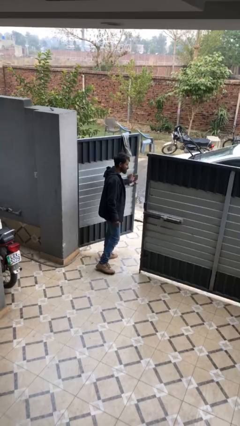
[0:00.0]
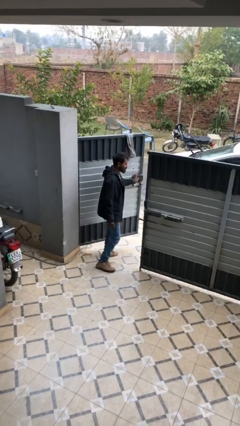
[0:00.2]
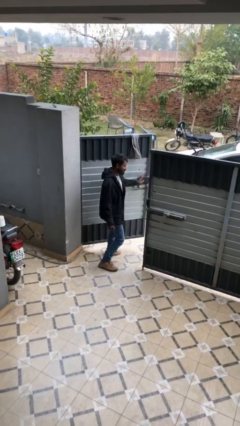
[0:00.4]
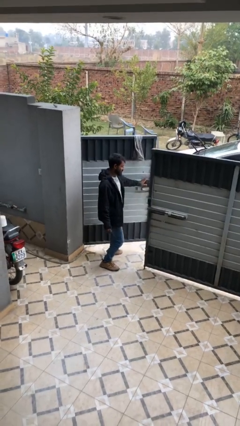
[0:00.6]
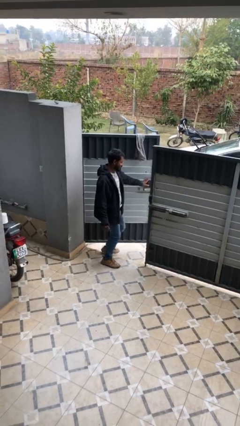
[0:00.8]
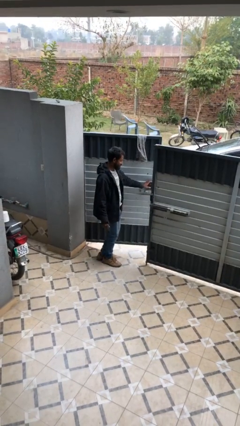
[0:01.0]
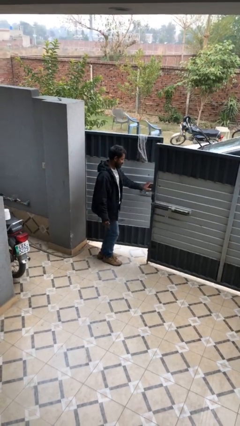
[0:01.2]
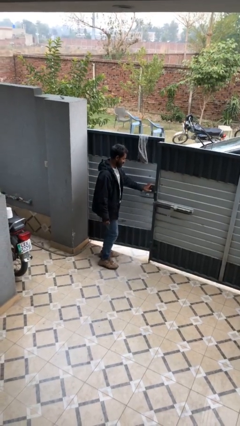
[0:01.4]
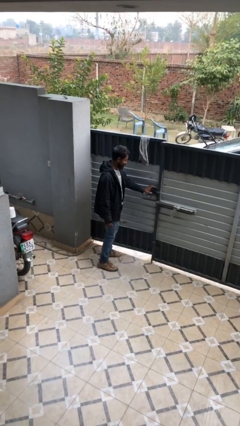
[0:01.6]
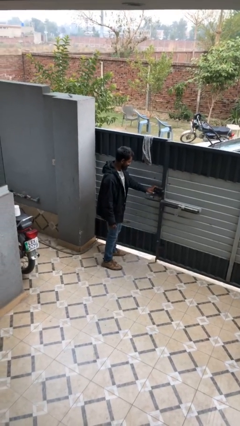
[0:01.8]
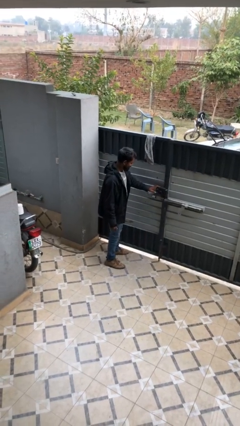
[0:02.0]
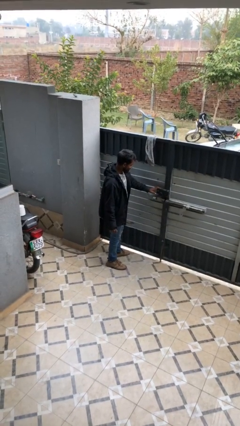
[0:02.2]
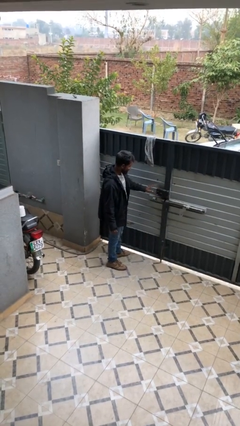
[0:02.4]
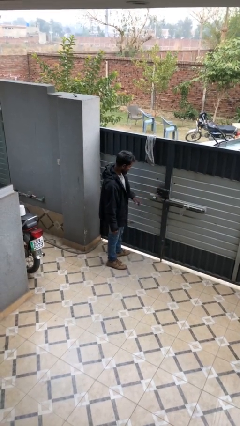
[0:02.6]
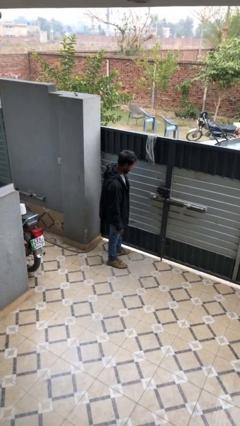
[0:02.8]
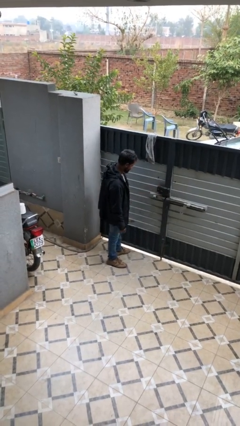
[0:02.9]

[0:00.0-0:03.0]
person closes facility door

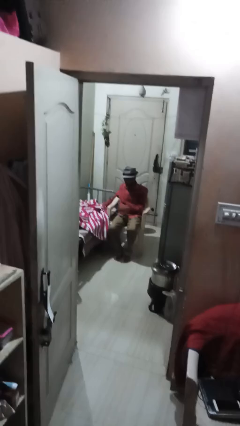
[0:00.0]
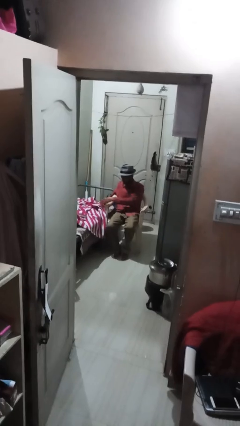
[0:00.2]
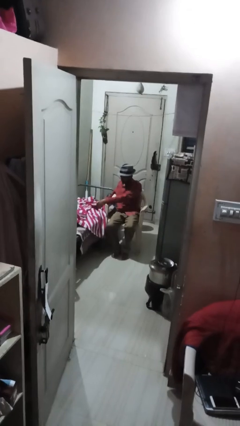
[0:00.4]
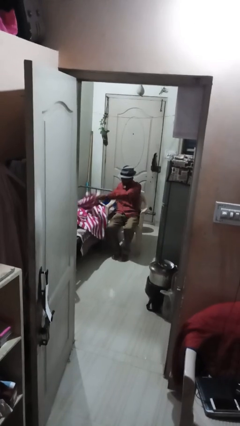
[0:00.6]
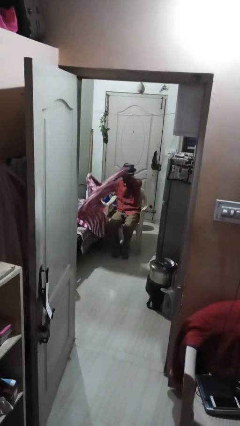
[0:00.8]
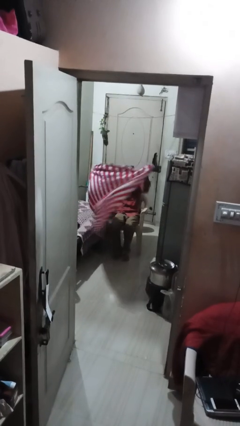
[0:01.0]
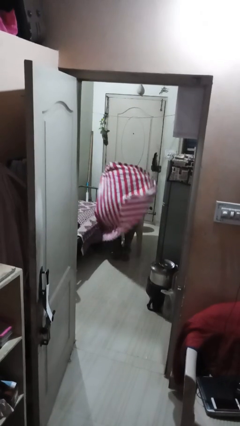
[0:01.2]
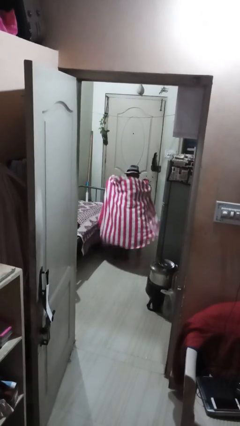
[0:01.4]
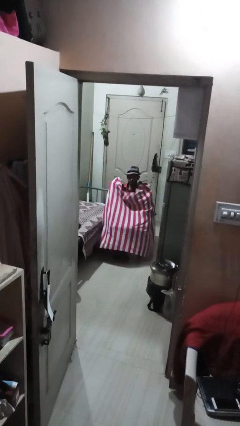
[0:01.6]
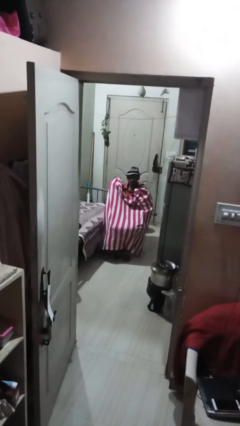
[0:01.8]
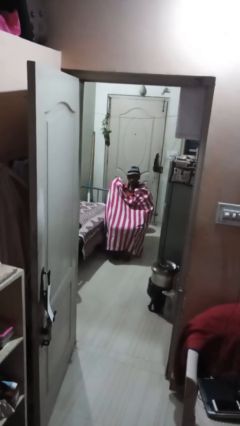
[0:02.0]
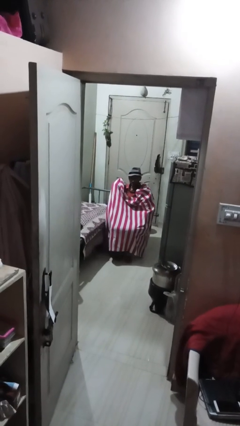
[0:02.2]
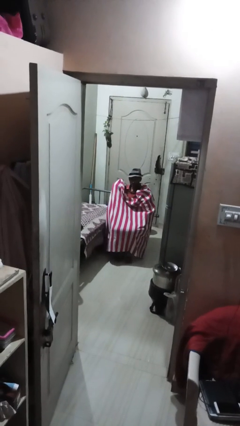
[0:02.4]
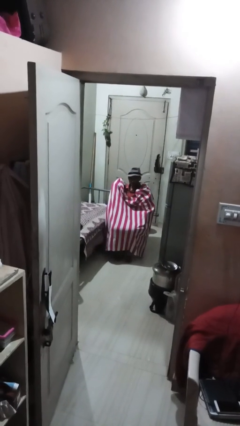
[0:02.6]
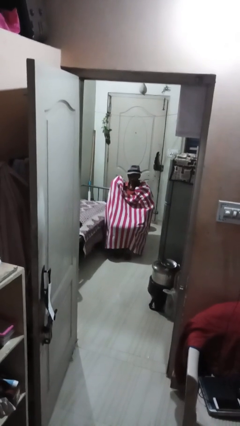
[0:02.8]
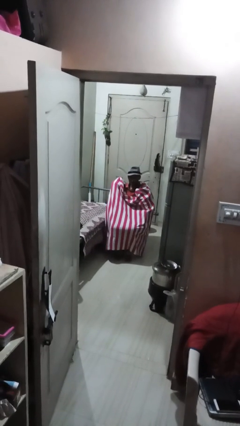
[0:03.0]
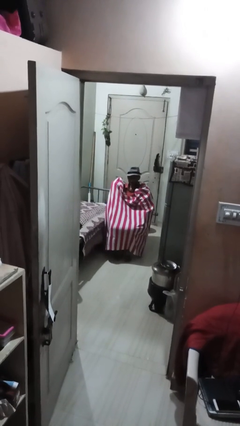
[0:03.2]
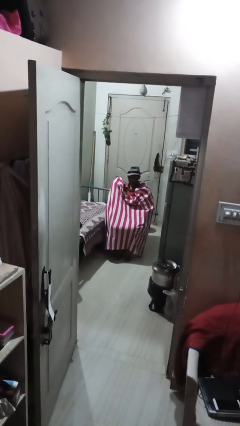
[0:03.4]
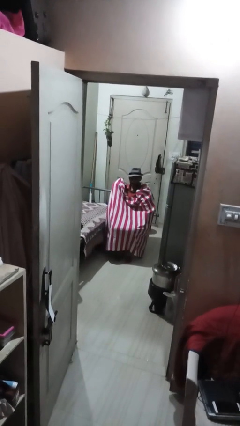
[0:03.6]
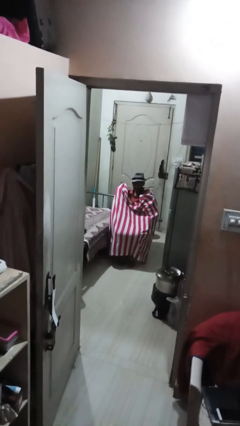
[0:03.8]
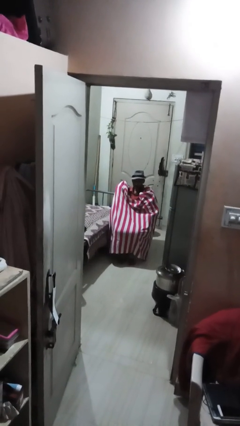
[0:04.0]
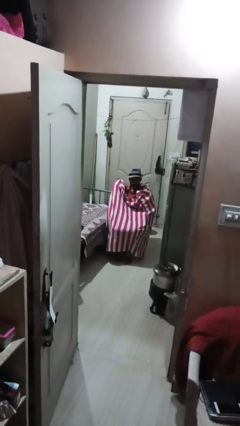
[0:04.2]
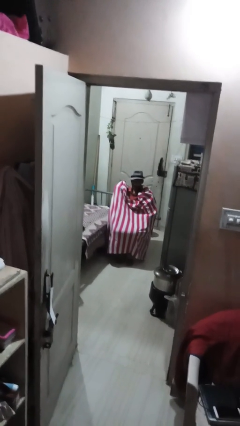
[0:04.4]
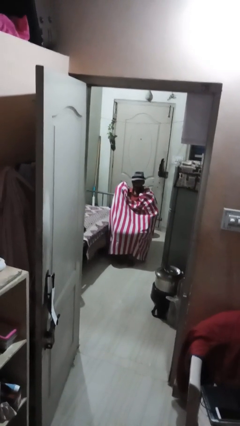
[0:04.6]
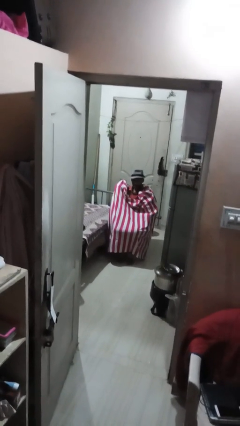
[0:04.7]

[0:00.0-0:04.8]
person covers with blanket

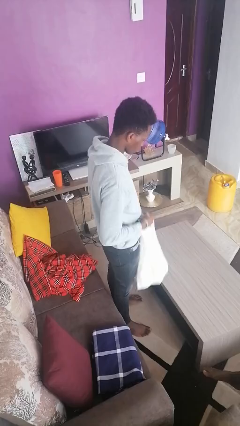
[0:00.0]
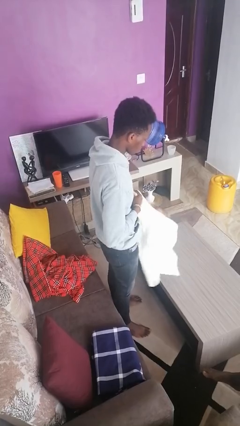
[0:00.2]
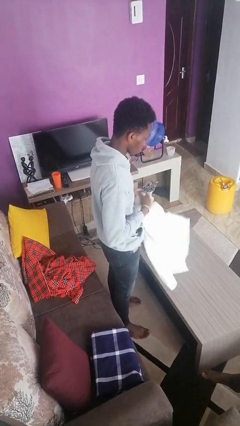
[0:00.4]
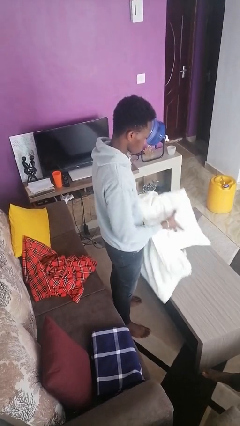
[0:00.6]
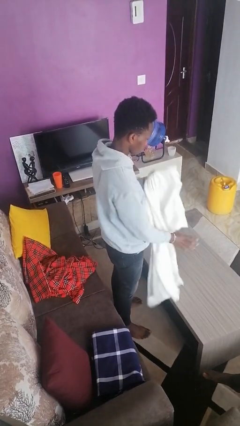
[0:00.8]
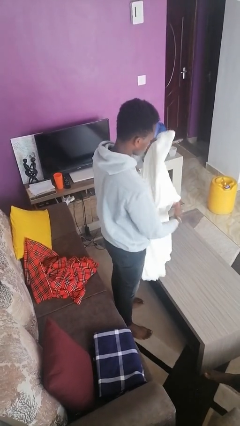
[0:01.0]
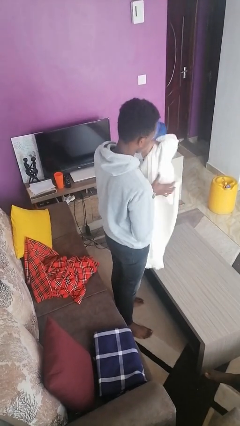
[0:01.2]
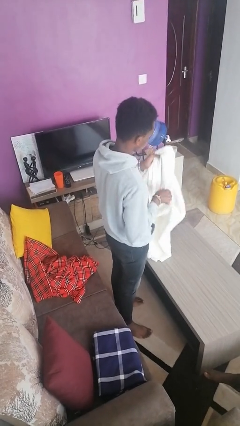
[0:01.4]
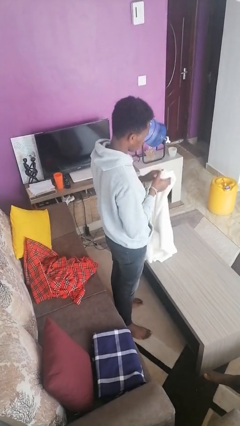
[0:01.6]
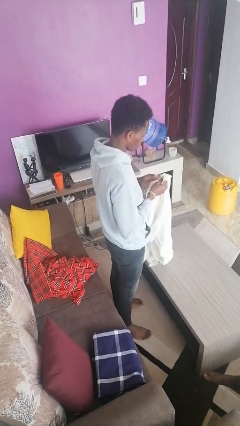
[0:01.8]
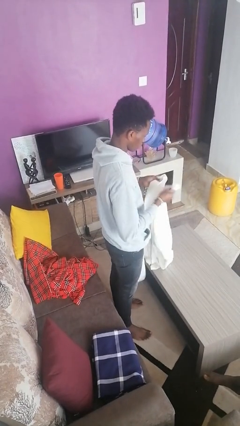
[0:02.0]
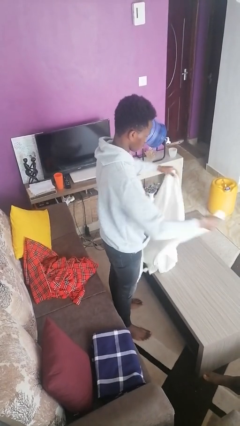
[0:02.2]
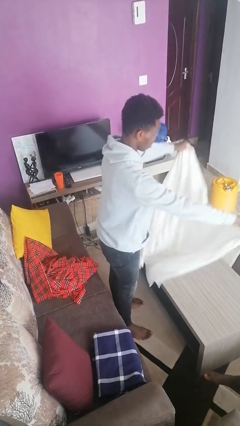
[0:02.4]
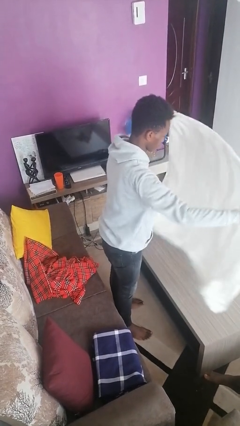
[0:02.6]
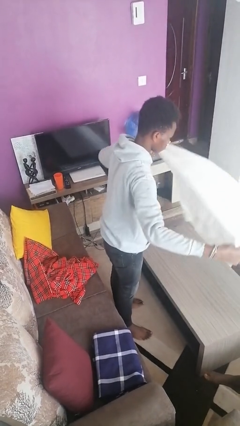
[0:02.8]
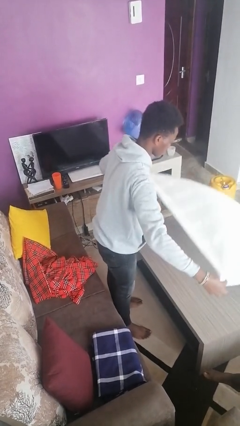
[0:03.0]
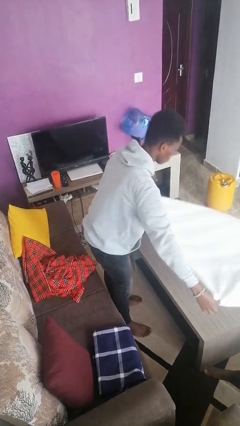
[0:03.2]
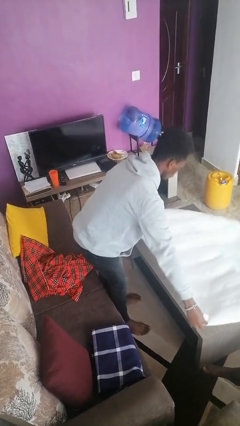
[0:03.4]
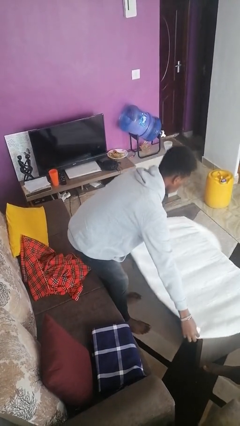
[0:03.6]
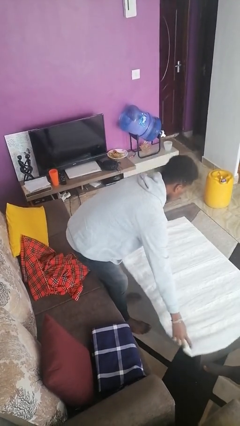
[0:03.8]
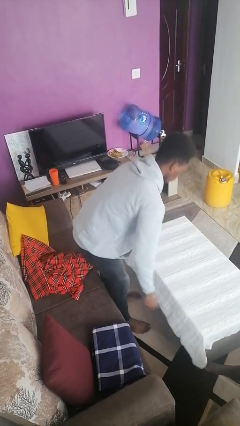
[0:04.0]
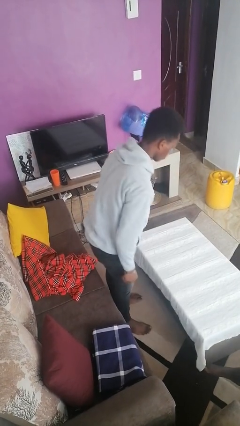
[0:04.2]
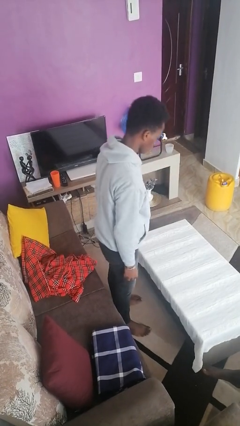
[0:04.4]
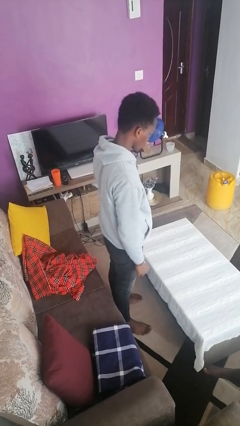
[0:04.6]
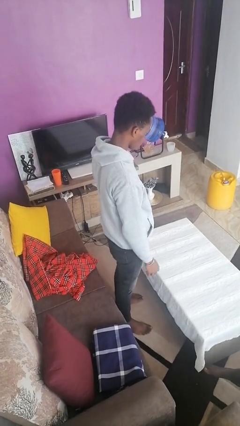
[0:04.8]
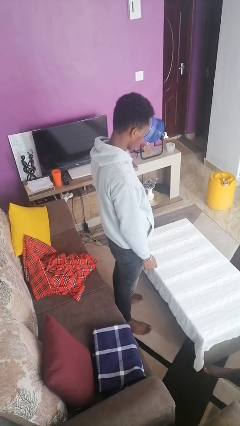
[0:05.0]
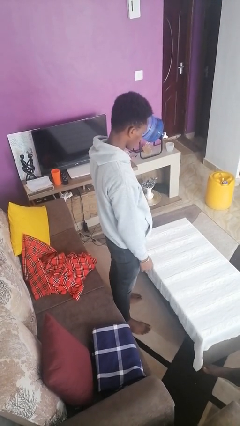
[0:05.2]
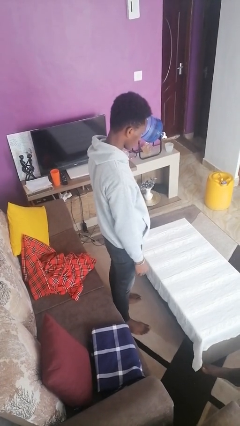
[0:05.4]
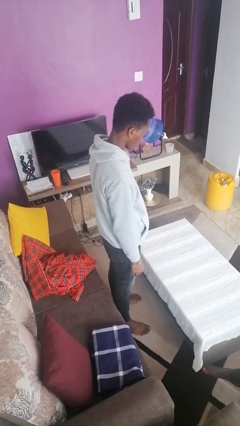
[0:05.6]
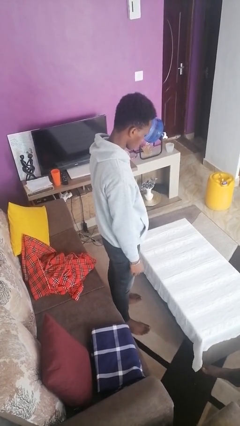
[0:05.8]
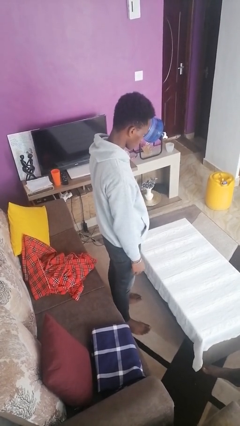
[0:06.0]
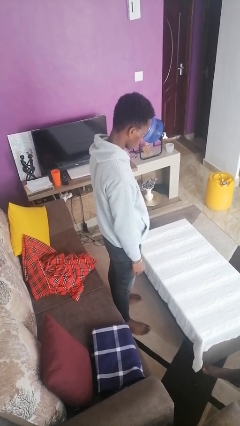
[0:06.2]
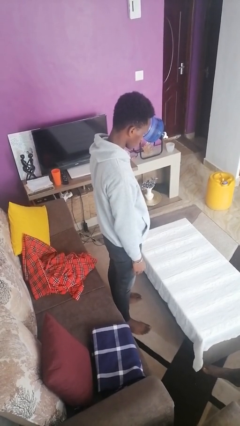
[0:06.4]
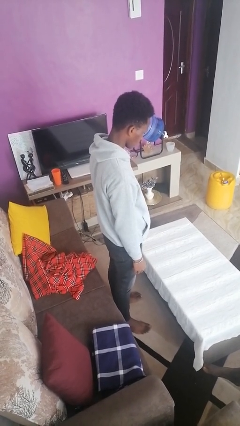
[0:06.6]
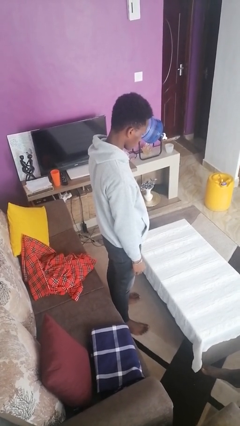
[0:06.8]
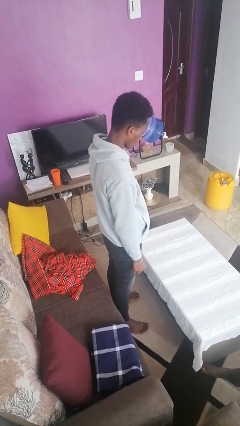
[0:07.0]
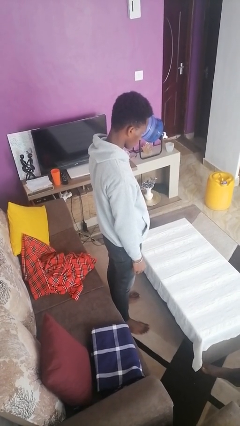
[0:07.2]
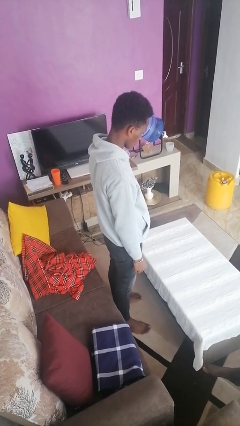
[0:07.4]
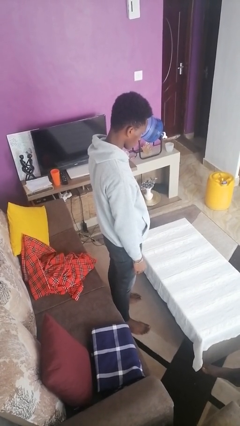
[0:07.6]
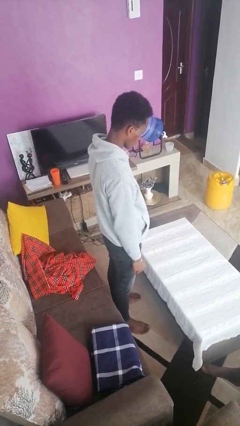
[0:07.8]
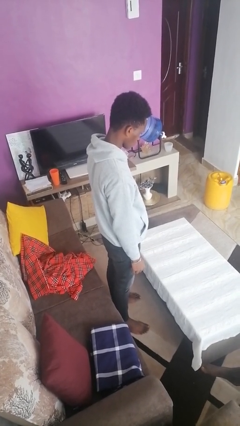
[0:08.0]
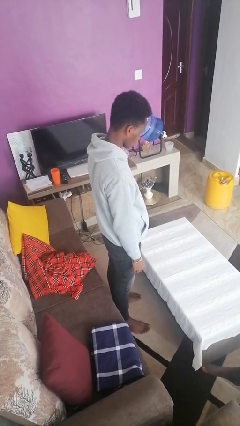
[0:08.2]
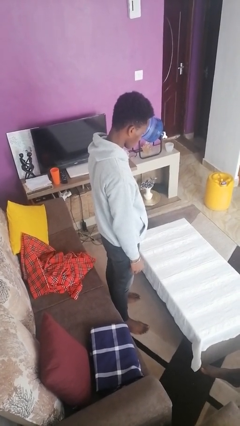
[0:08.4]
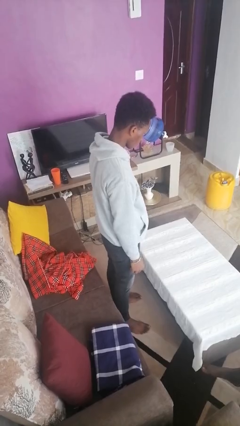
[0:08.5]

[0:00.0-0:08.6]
person spreads tablecloth

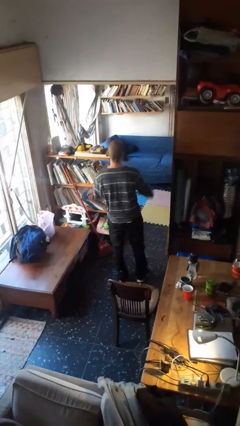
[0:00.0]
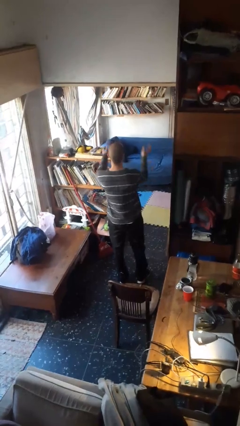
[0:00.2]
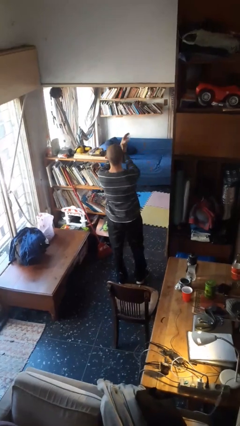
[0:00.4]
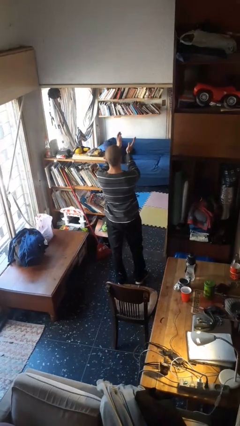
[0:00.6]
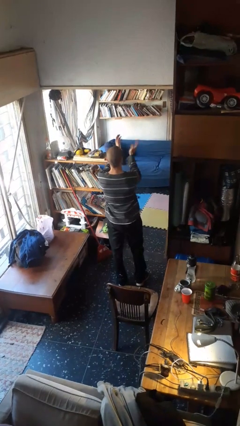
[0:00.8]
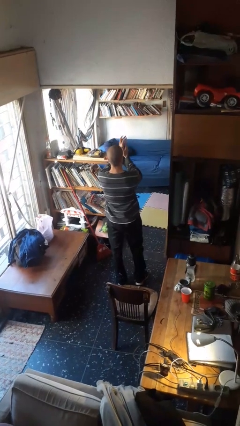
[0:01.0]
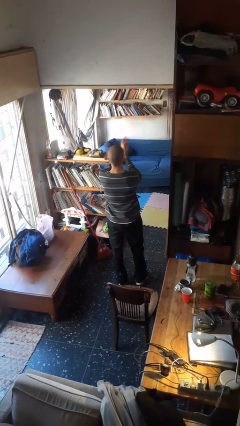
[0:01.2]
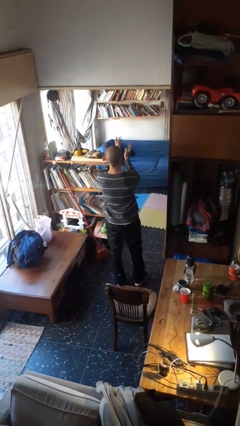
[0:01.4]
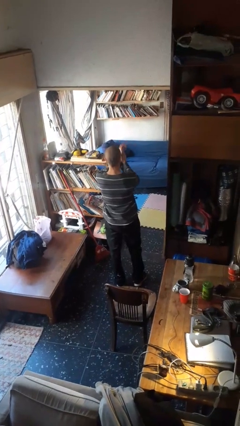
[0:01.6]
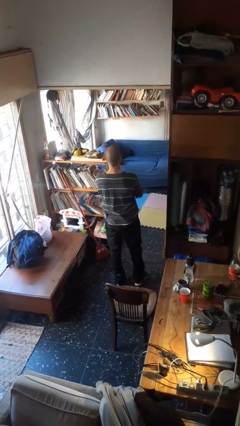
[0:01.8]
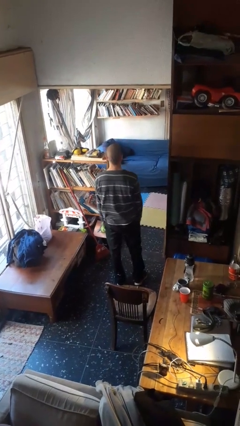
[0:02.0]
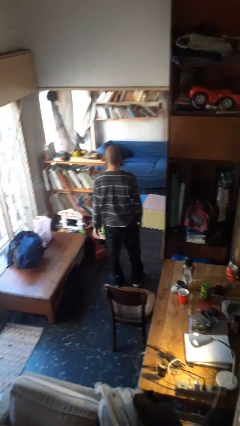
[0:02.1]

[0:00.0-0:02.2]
person claps hands
